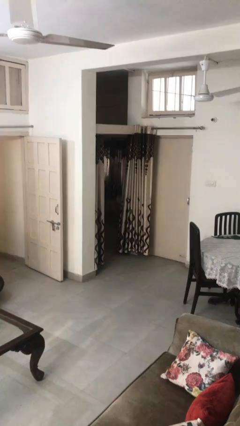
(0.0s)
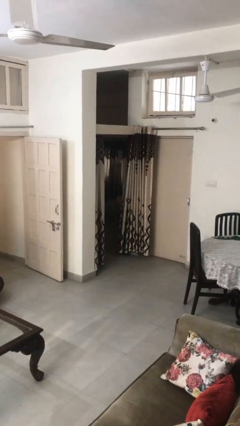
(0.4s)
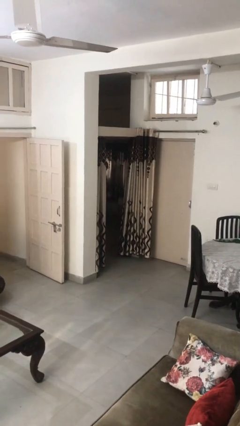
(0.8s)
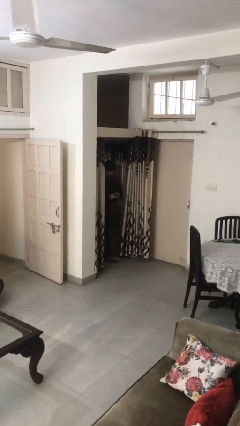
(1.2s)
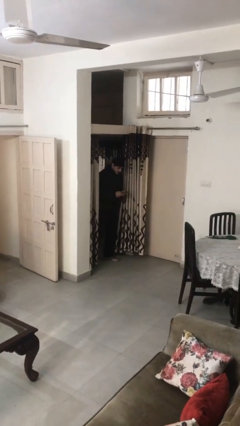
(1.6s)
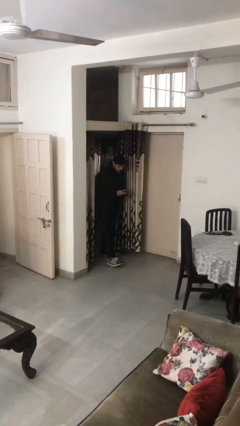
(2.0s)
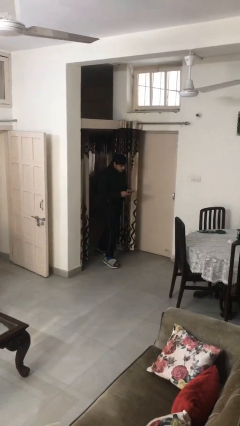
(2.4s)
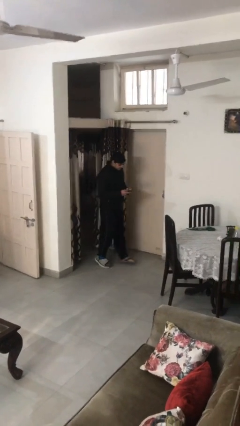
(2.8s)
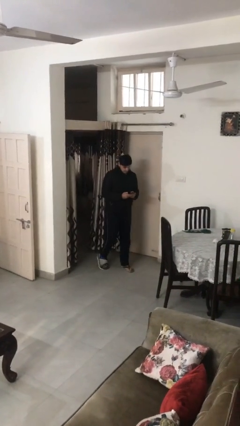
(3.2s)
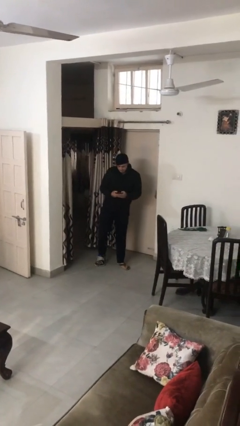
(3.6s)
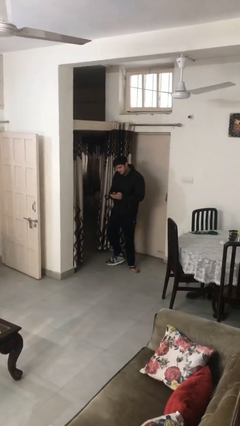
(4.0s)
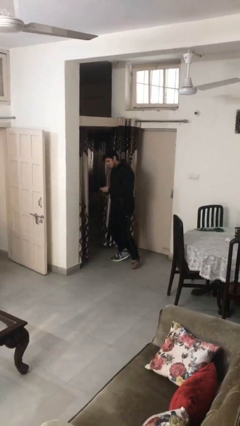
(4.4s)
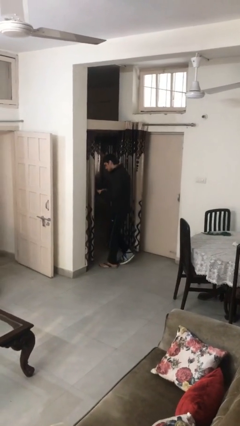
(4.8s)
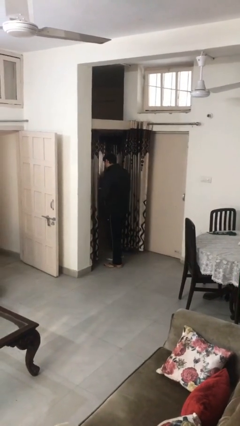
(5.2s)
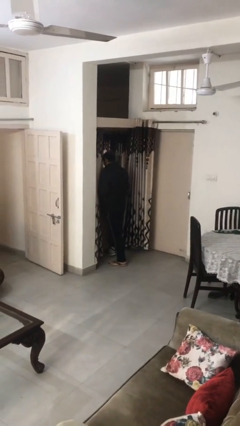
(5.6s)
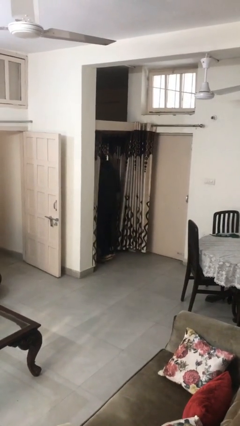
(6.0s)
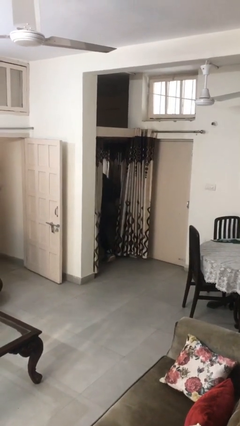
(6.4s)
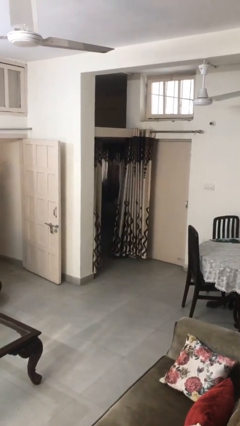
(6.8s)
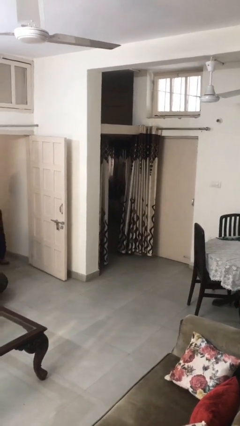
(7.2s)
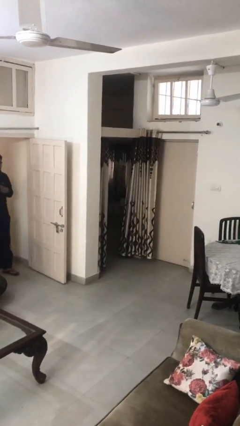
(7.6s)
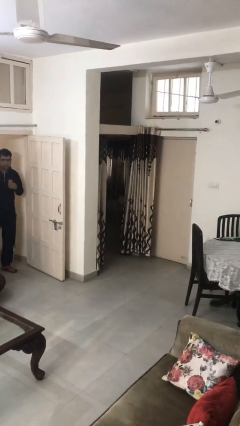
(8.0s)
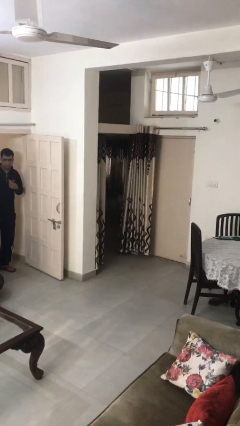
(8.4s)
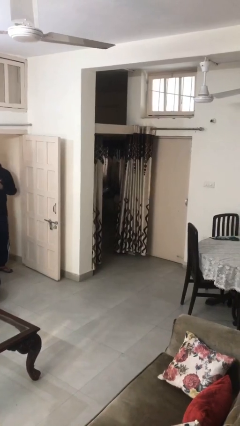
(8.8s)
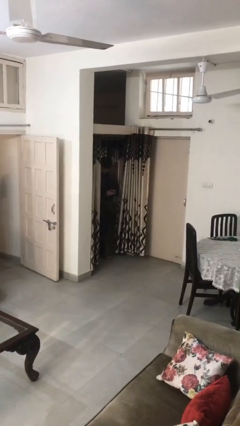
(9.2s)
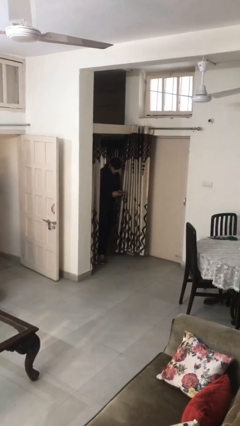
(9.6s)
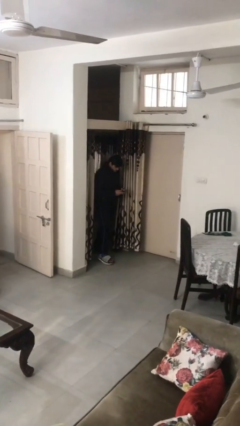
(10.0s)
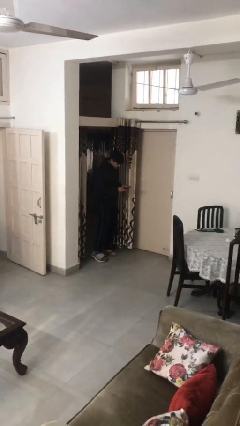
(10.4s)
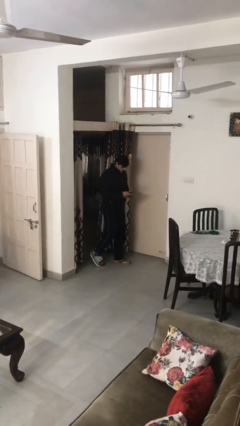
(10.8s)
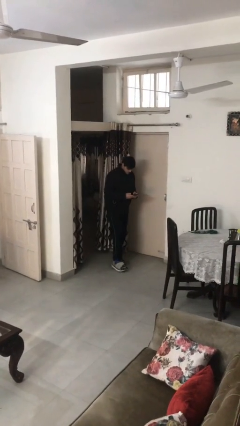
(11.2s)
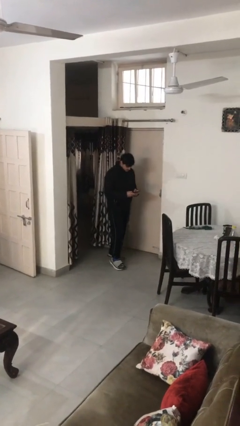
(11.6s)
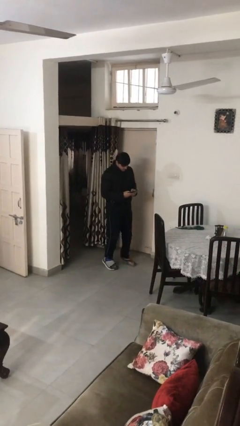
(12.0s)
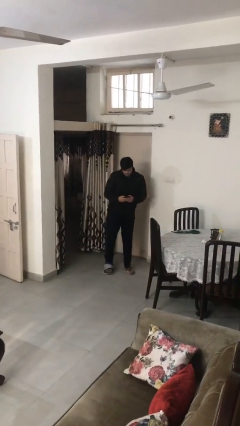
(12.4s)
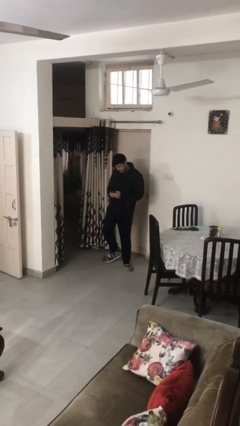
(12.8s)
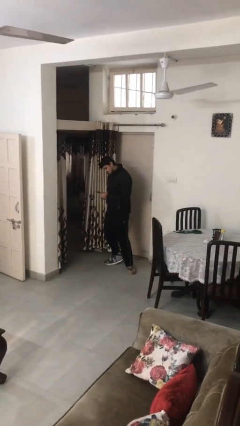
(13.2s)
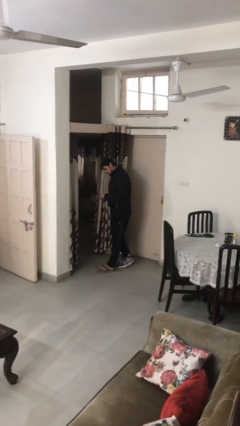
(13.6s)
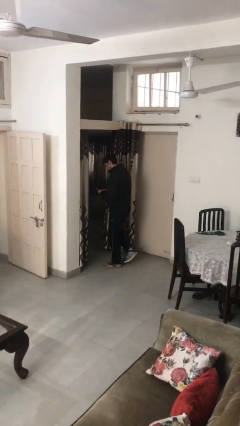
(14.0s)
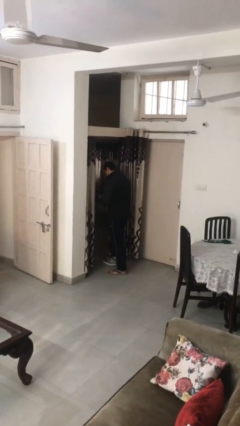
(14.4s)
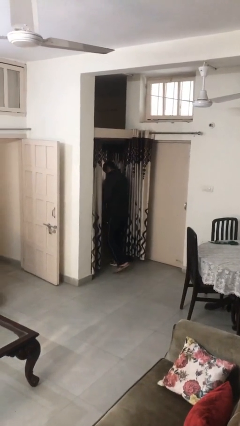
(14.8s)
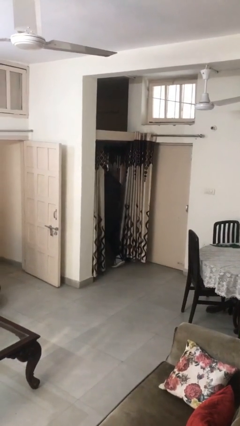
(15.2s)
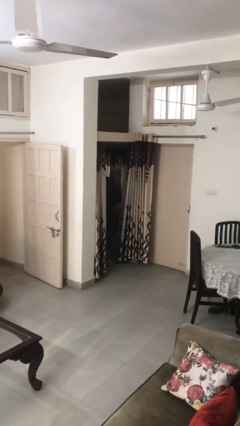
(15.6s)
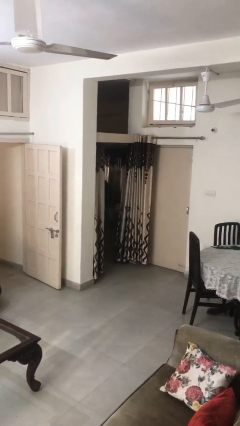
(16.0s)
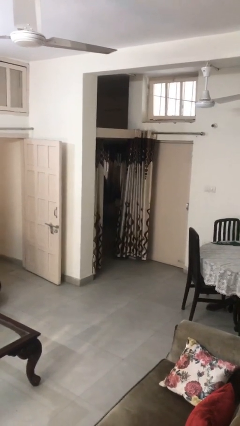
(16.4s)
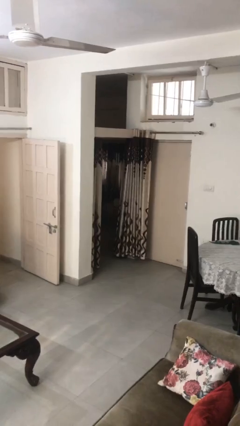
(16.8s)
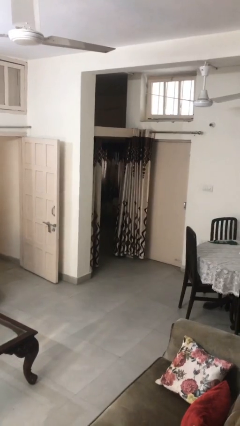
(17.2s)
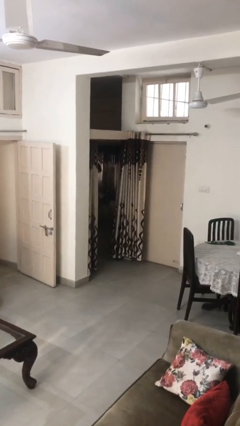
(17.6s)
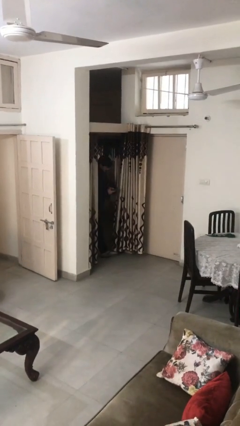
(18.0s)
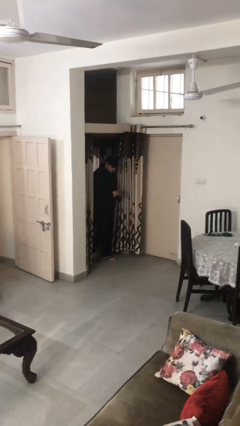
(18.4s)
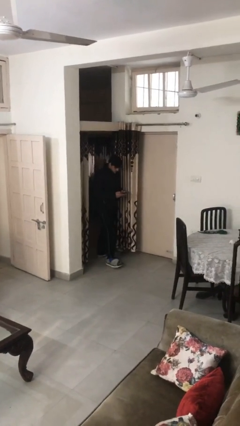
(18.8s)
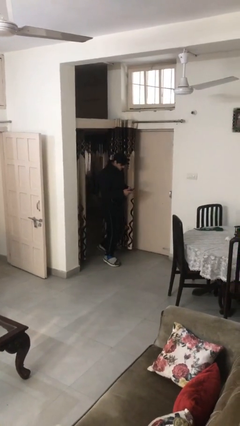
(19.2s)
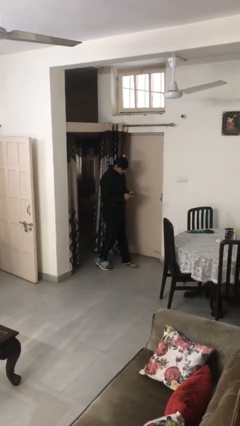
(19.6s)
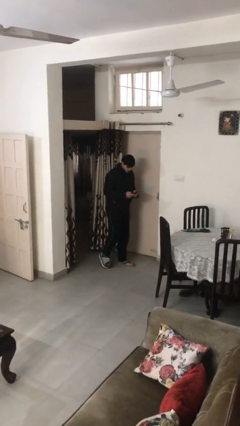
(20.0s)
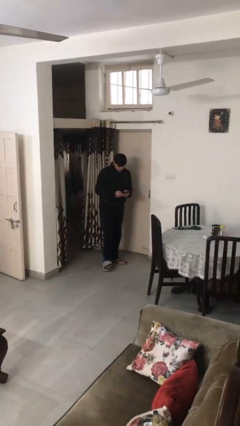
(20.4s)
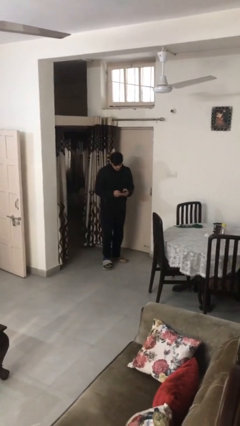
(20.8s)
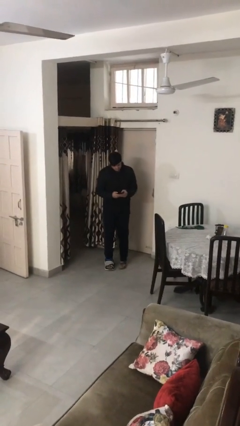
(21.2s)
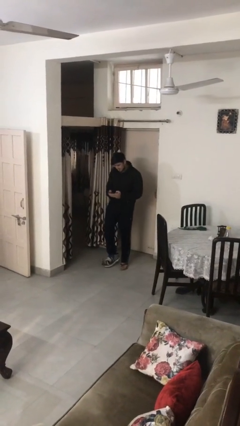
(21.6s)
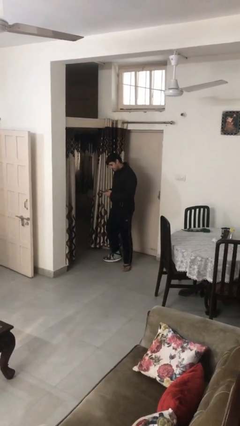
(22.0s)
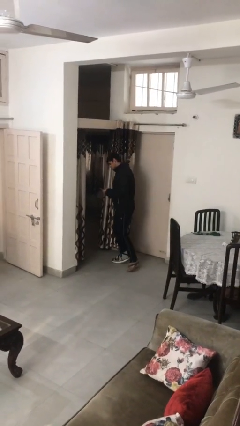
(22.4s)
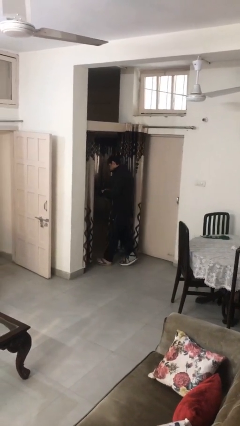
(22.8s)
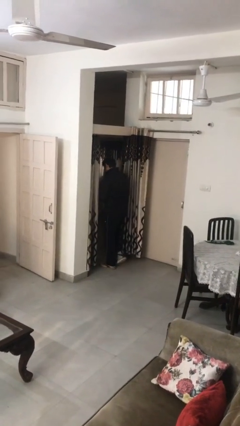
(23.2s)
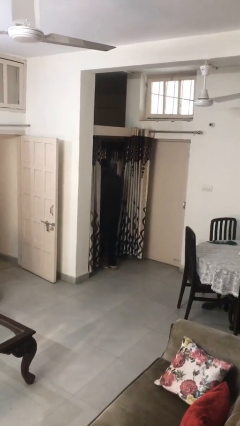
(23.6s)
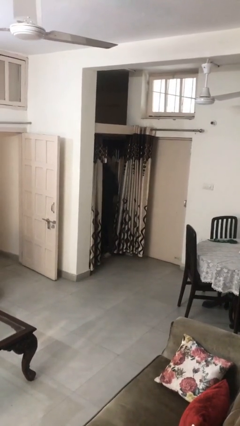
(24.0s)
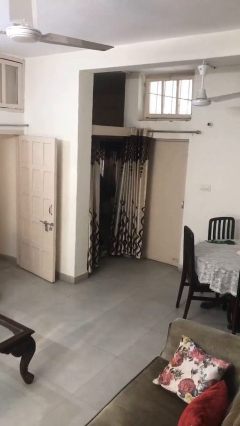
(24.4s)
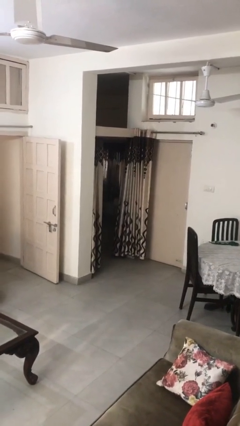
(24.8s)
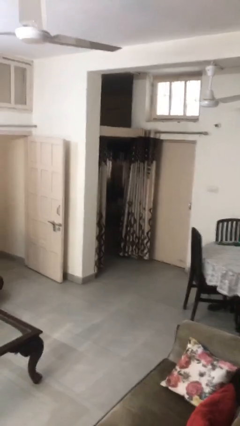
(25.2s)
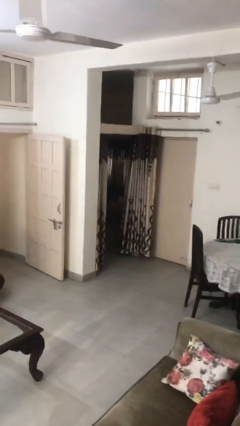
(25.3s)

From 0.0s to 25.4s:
person texts on phone

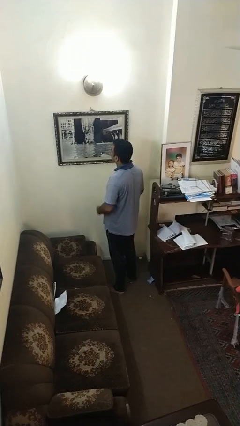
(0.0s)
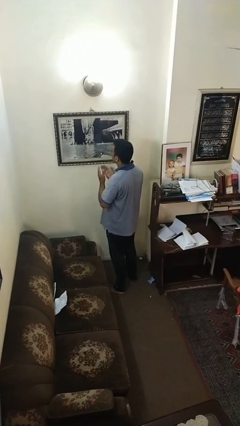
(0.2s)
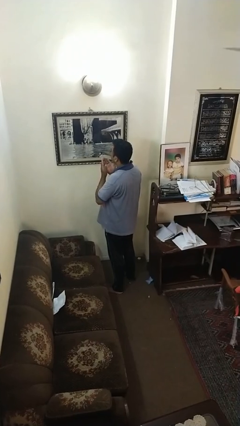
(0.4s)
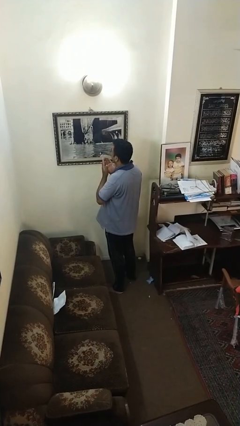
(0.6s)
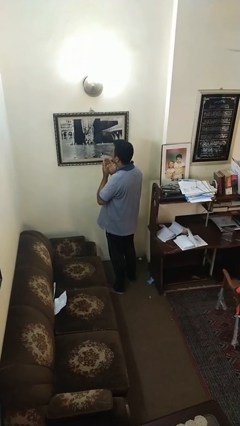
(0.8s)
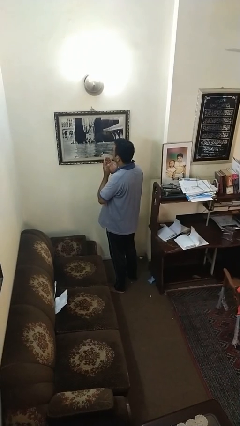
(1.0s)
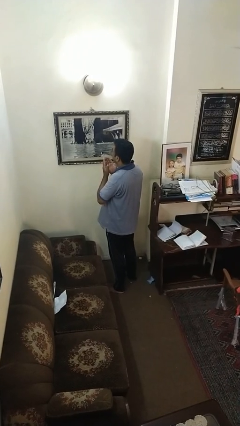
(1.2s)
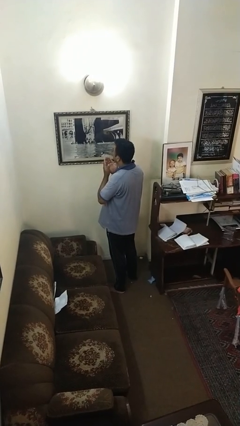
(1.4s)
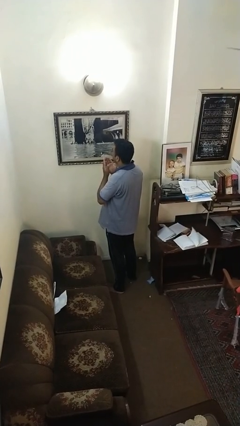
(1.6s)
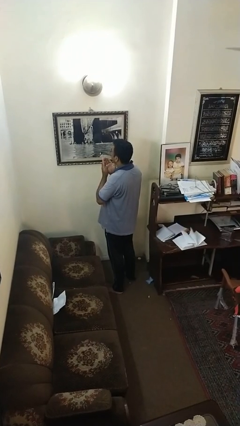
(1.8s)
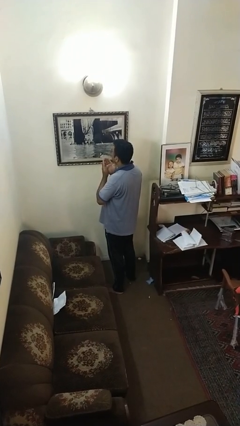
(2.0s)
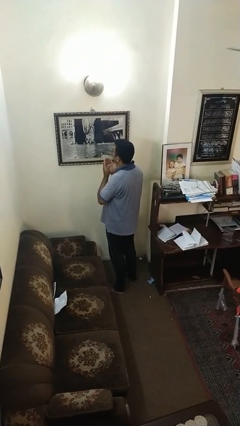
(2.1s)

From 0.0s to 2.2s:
person prays

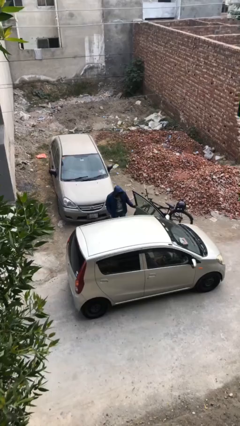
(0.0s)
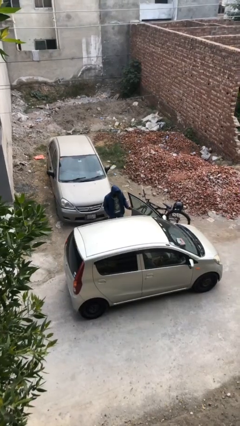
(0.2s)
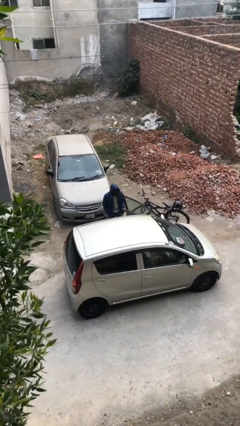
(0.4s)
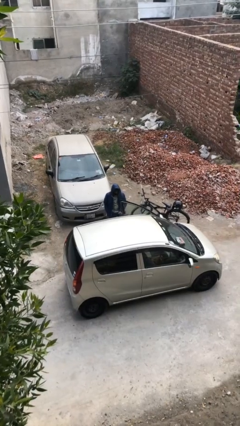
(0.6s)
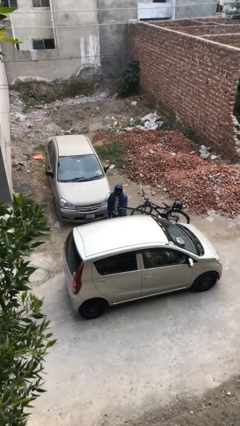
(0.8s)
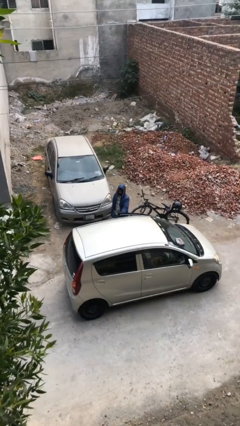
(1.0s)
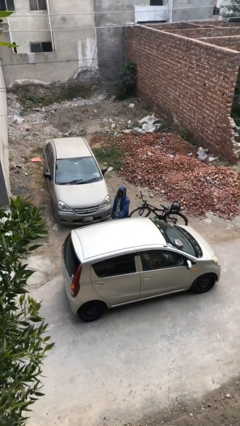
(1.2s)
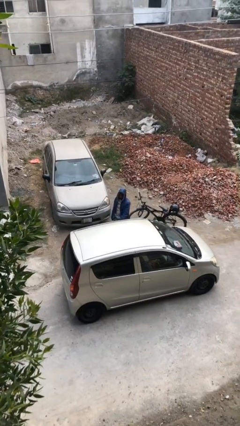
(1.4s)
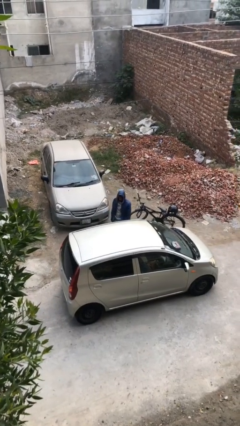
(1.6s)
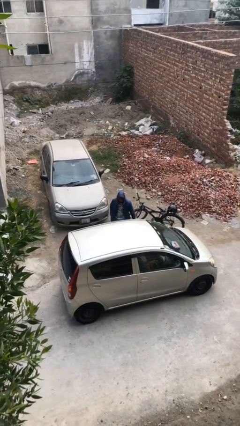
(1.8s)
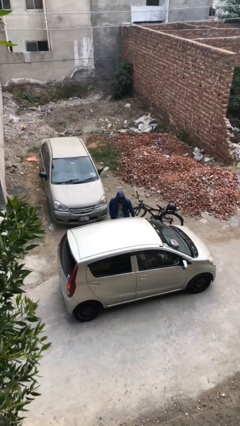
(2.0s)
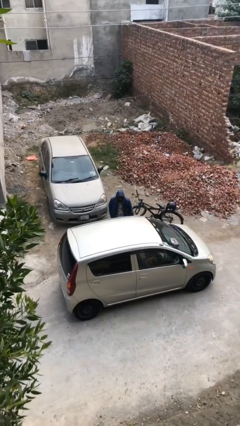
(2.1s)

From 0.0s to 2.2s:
person closes car door

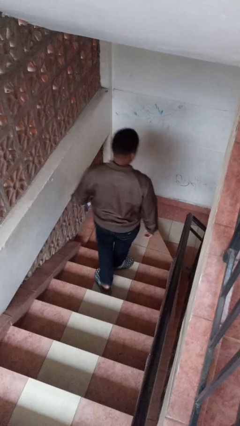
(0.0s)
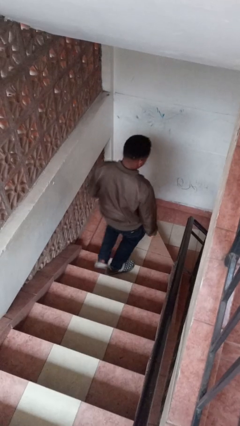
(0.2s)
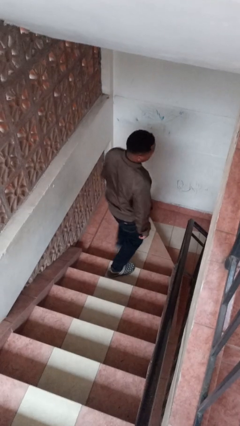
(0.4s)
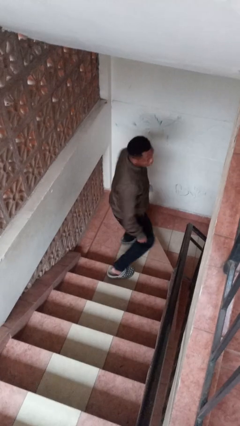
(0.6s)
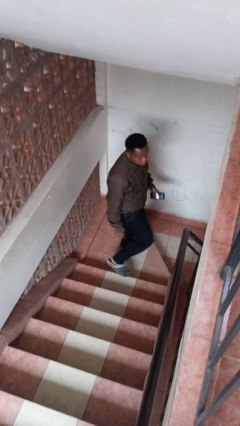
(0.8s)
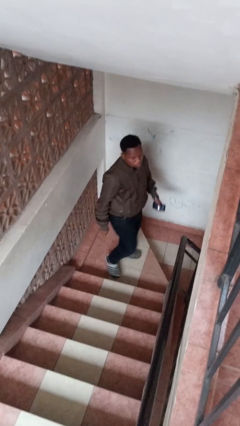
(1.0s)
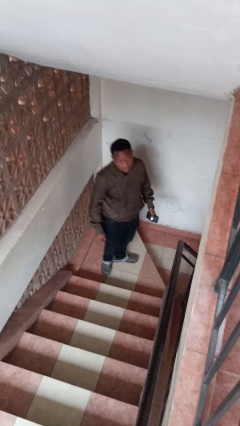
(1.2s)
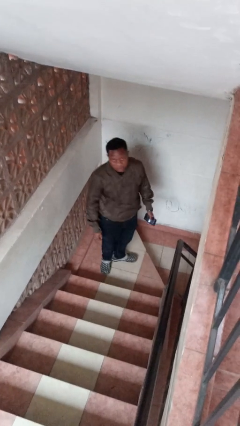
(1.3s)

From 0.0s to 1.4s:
person climbs down stairs
